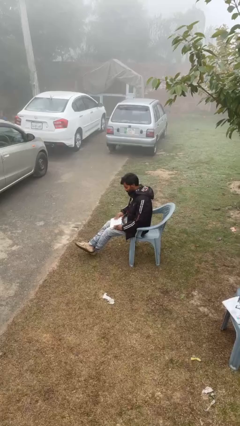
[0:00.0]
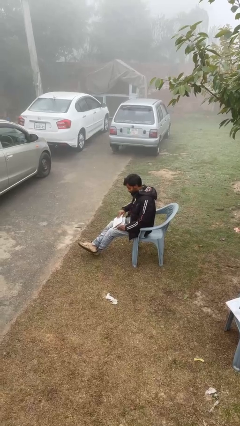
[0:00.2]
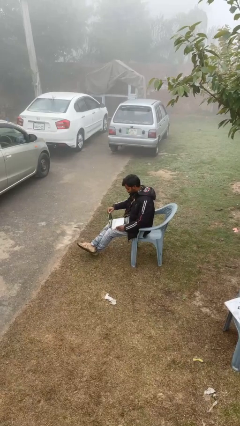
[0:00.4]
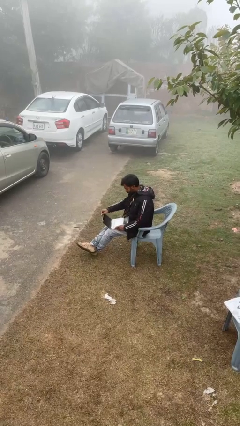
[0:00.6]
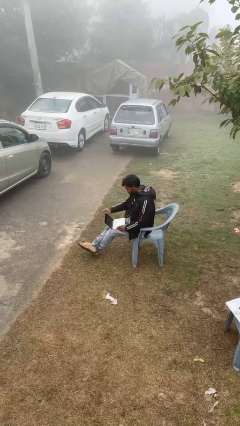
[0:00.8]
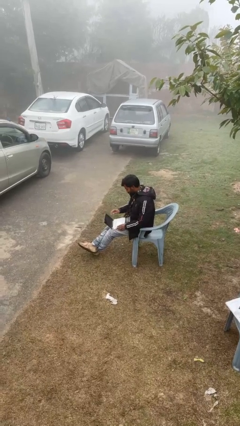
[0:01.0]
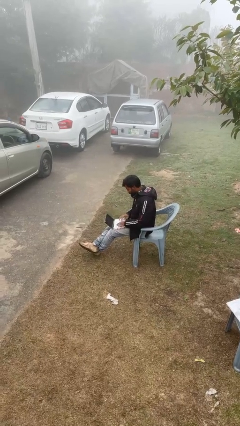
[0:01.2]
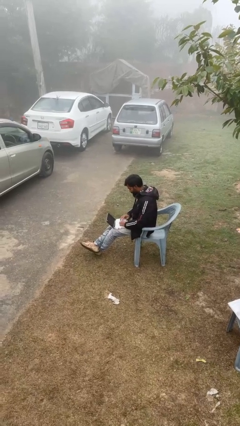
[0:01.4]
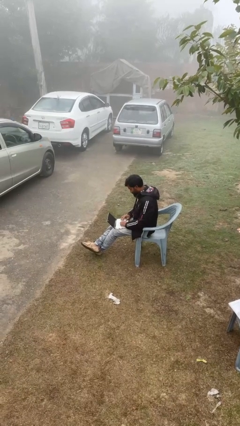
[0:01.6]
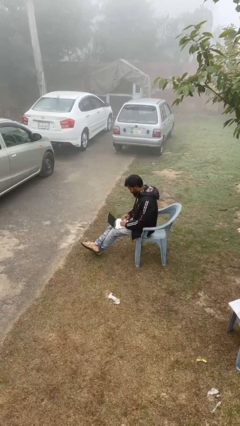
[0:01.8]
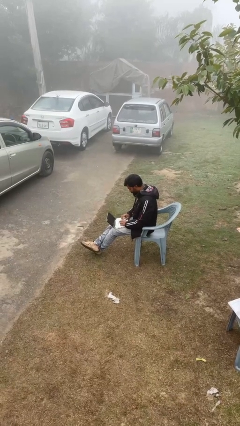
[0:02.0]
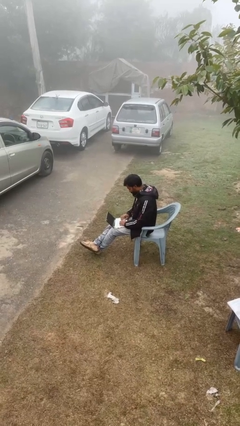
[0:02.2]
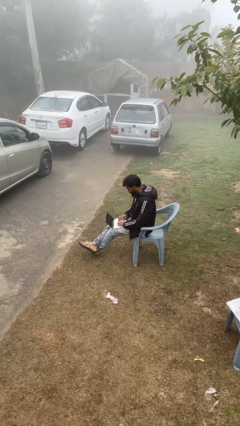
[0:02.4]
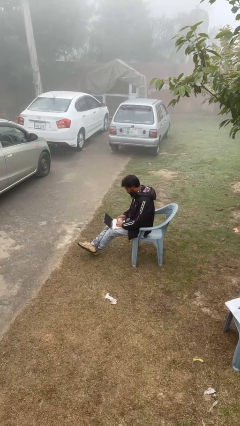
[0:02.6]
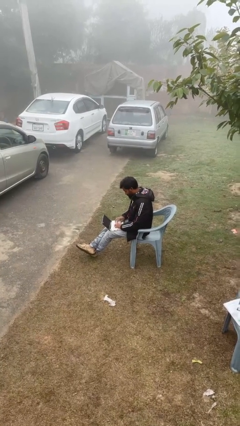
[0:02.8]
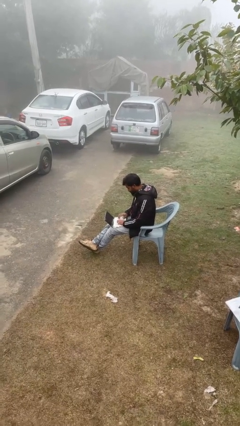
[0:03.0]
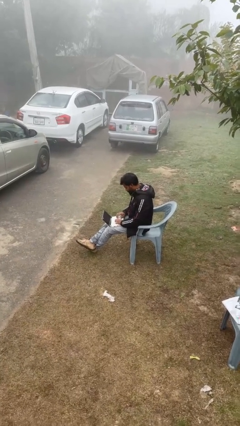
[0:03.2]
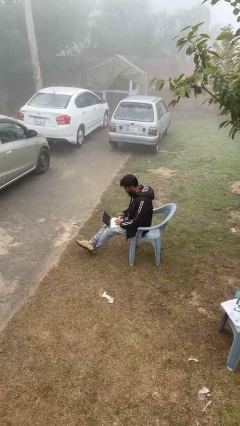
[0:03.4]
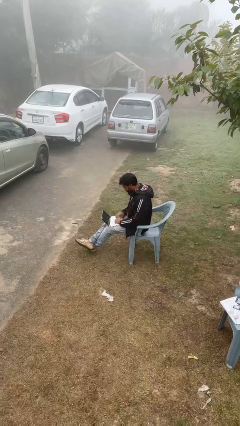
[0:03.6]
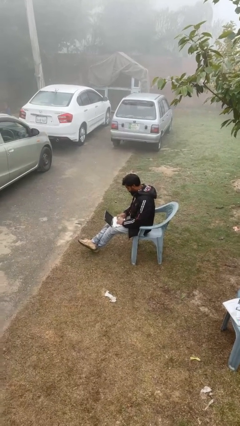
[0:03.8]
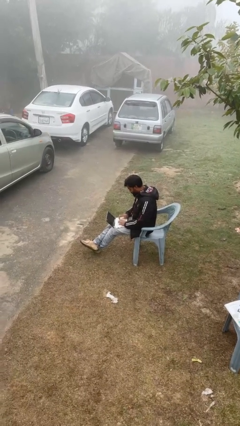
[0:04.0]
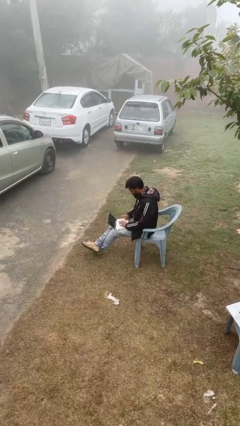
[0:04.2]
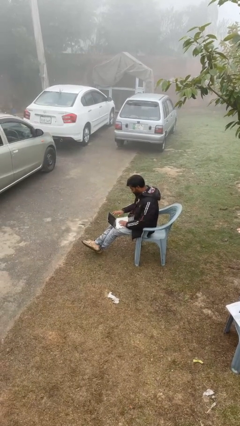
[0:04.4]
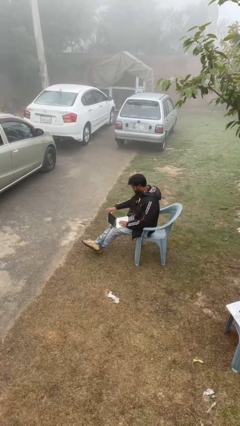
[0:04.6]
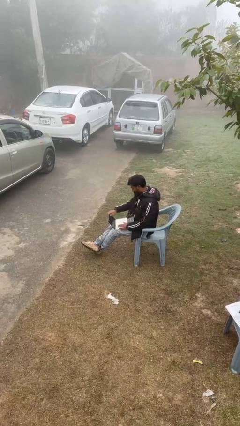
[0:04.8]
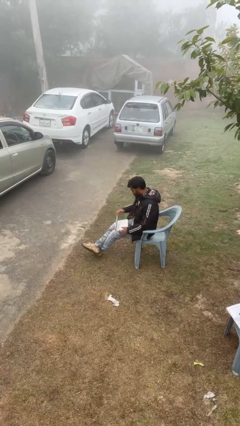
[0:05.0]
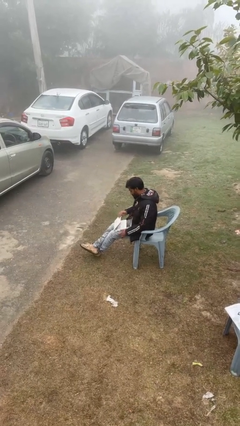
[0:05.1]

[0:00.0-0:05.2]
person interacts with laptop

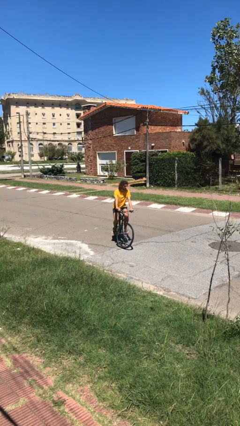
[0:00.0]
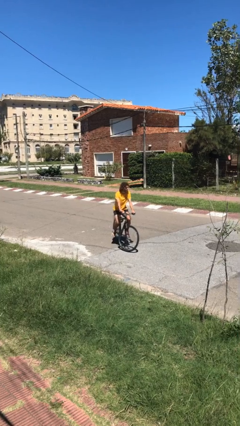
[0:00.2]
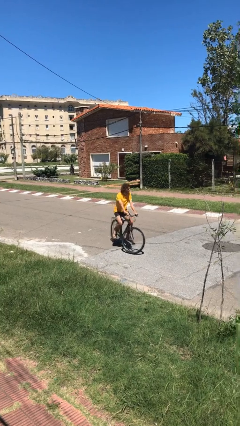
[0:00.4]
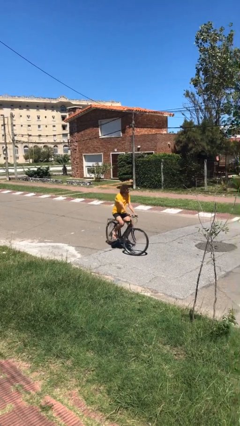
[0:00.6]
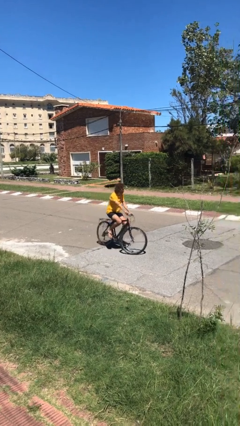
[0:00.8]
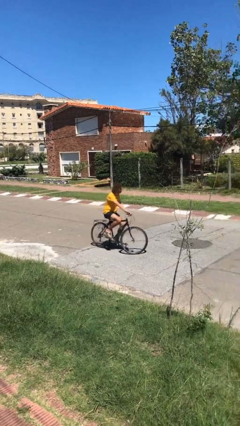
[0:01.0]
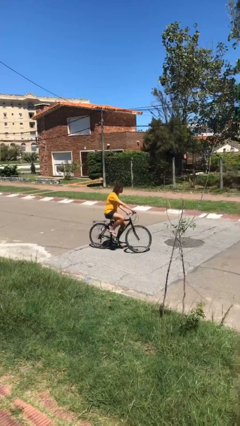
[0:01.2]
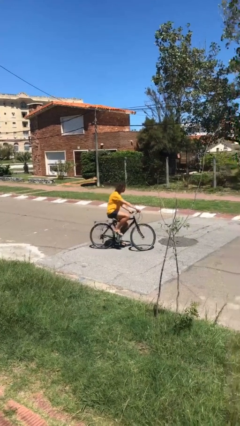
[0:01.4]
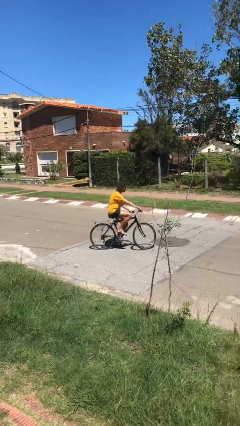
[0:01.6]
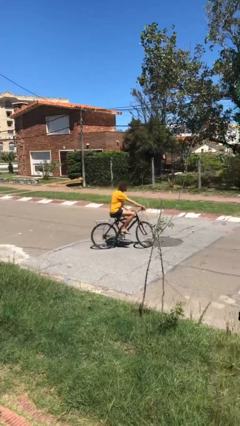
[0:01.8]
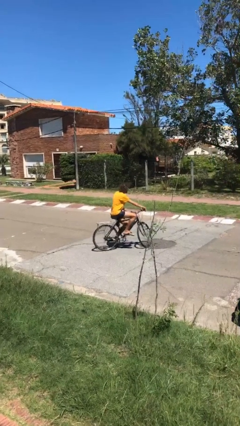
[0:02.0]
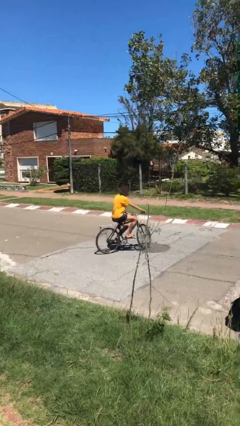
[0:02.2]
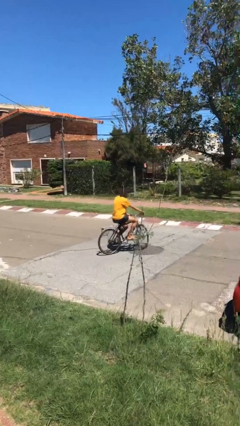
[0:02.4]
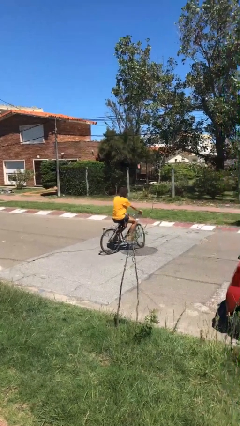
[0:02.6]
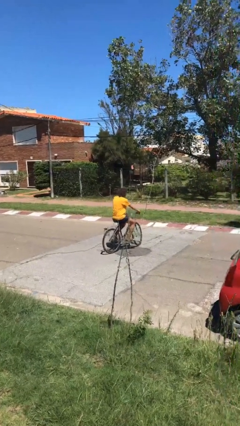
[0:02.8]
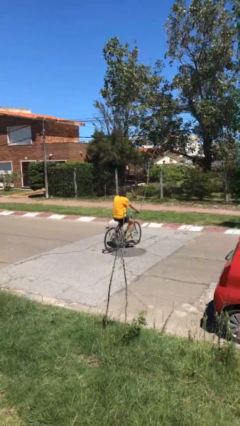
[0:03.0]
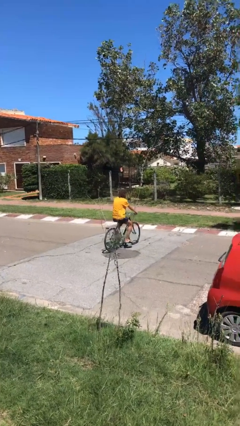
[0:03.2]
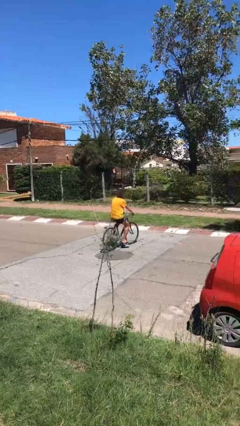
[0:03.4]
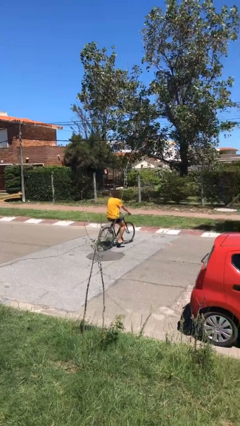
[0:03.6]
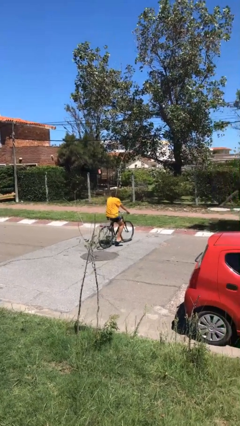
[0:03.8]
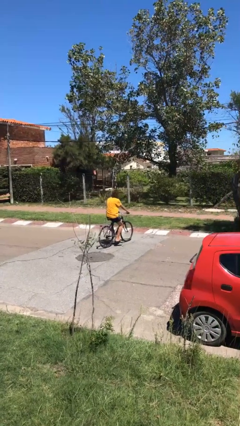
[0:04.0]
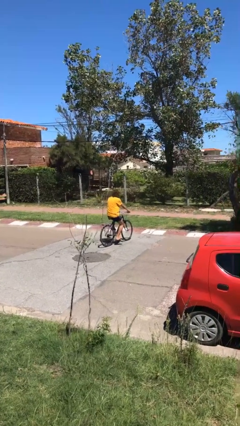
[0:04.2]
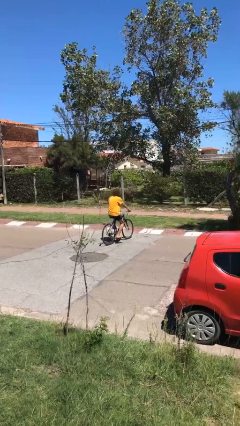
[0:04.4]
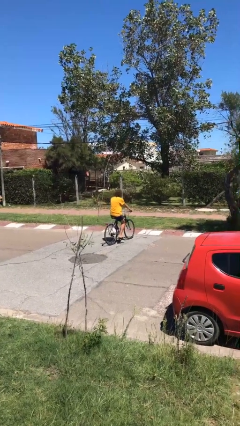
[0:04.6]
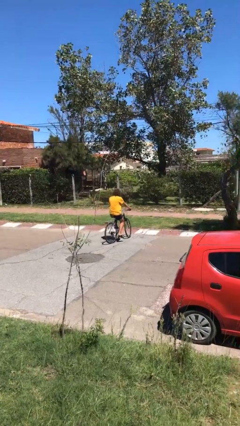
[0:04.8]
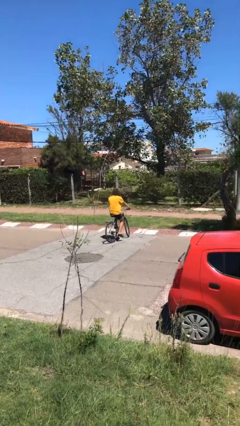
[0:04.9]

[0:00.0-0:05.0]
person rides bicycle

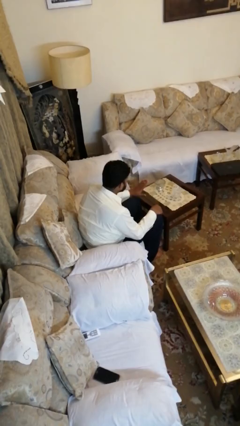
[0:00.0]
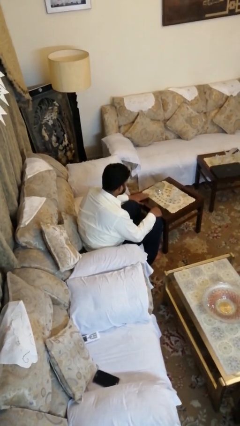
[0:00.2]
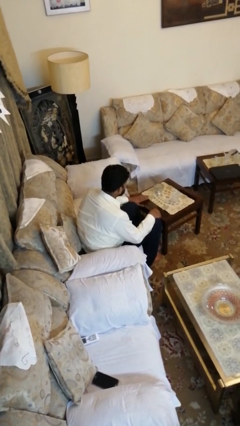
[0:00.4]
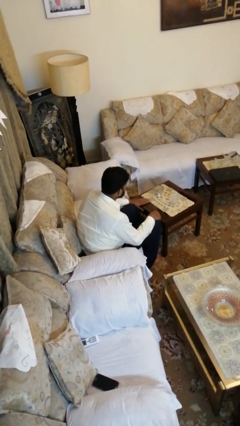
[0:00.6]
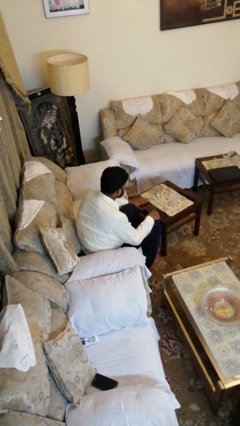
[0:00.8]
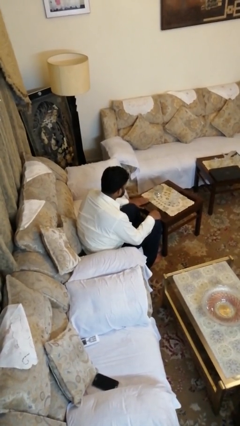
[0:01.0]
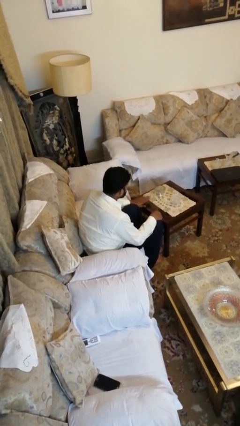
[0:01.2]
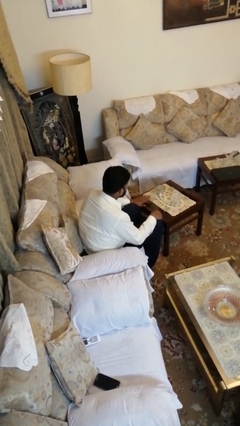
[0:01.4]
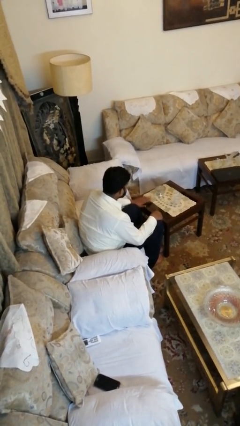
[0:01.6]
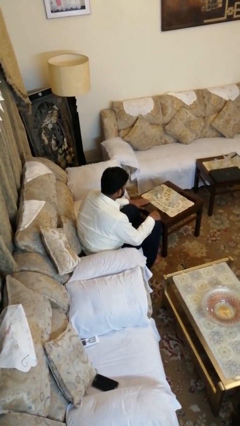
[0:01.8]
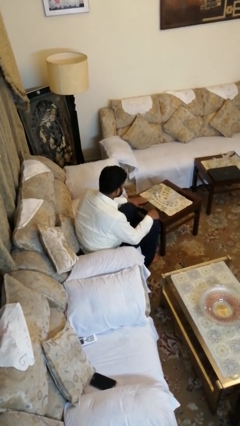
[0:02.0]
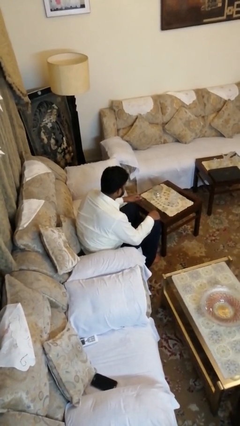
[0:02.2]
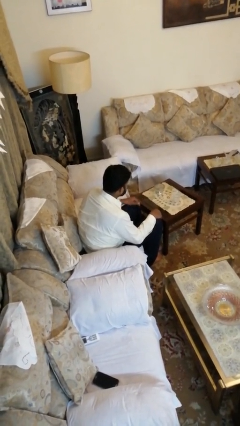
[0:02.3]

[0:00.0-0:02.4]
person taps object with finger

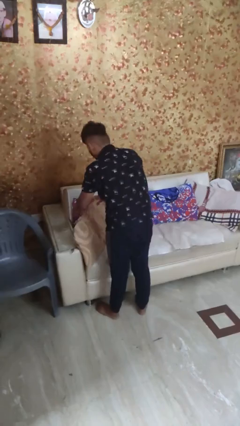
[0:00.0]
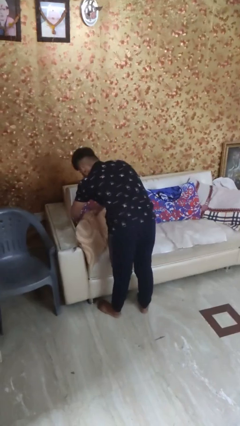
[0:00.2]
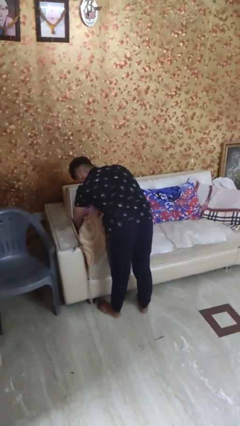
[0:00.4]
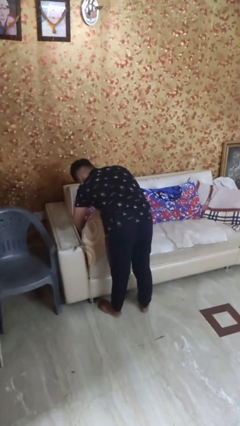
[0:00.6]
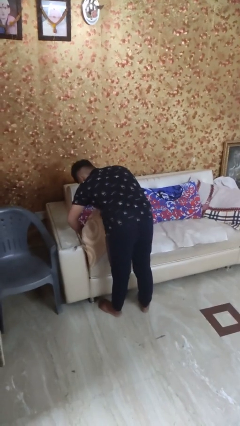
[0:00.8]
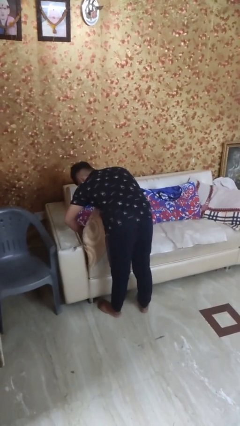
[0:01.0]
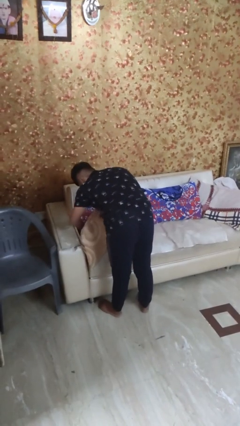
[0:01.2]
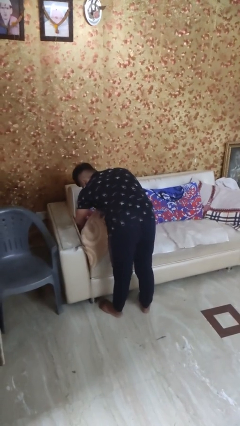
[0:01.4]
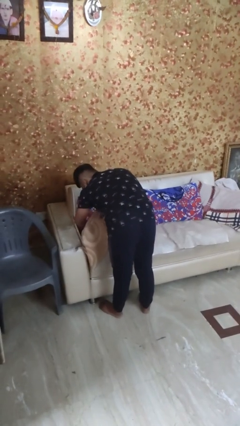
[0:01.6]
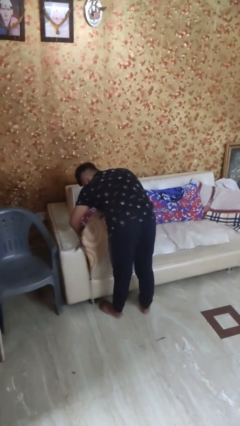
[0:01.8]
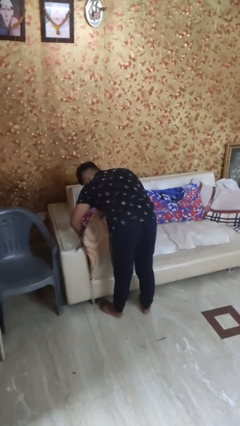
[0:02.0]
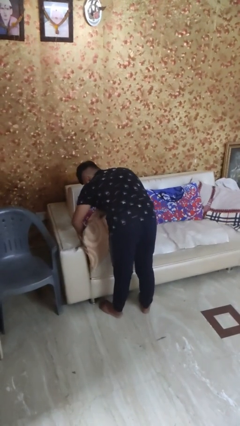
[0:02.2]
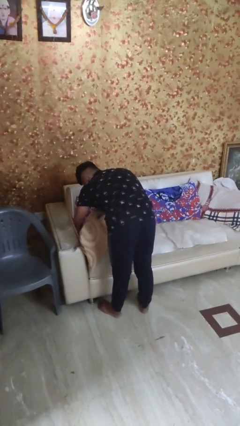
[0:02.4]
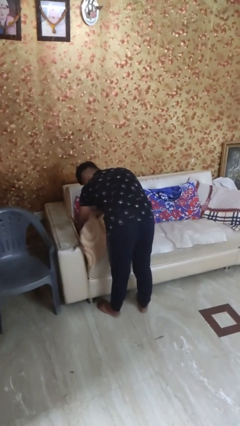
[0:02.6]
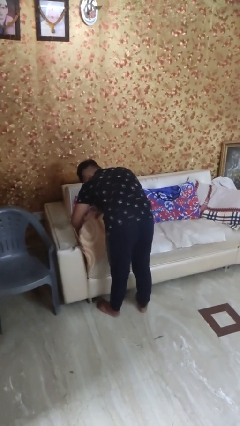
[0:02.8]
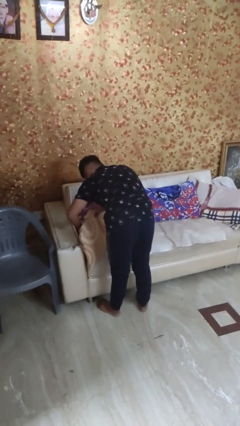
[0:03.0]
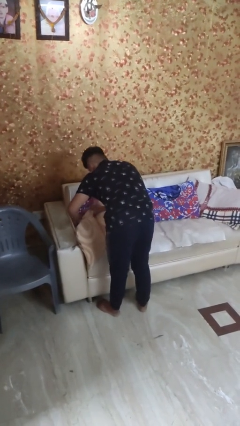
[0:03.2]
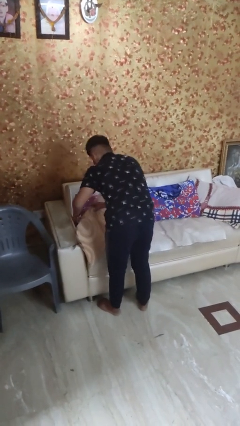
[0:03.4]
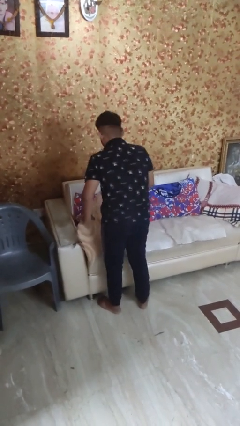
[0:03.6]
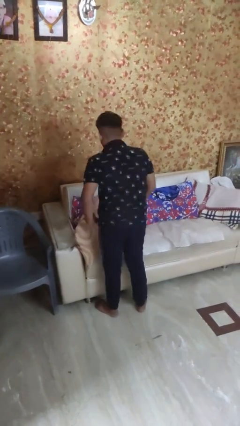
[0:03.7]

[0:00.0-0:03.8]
person searches in couch

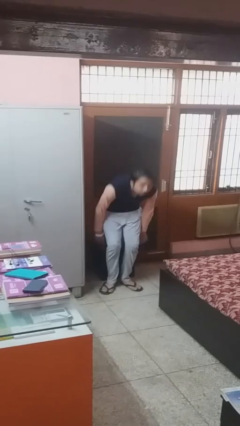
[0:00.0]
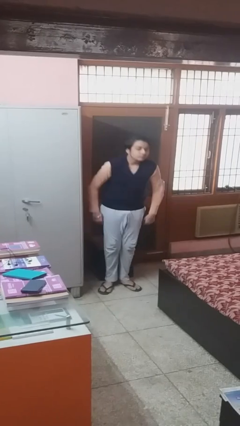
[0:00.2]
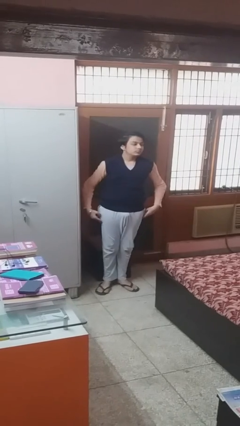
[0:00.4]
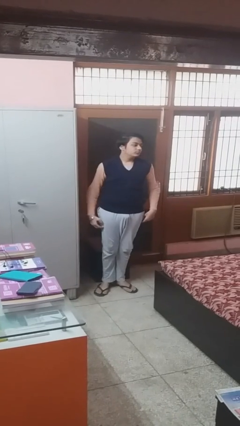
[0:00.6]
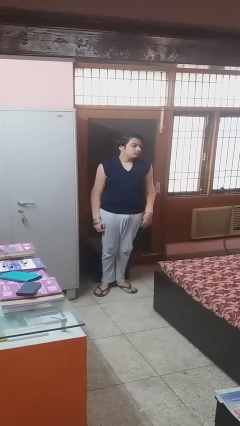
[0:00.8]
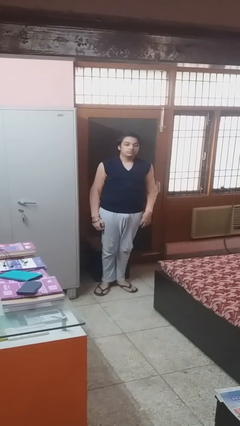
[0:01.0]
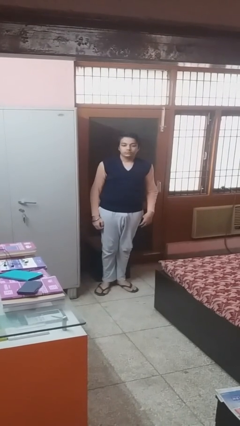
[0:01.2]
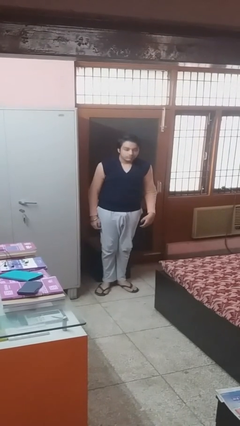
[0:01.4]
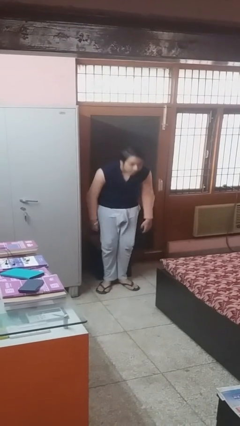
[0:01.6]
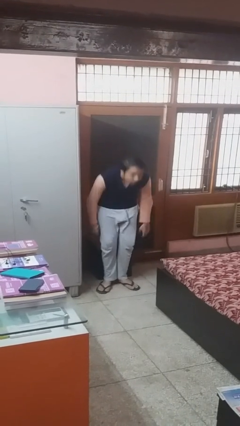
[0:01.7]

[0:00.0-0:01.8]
person stands up
